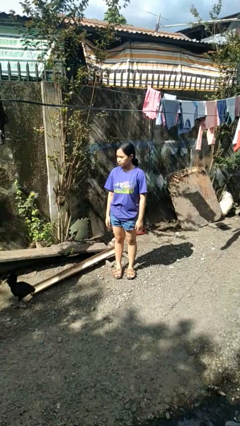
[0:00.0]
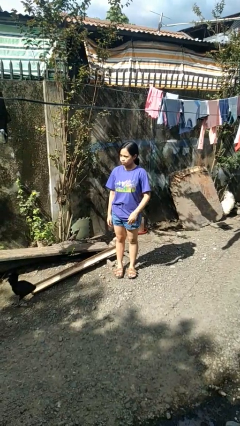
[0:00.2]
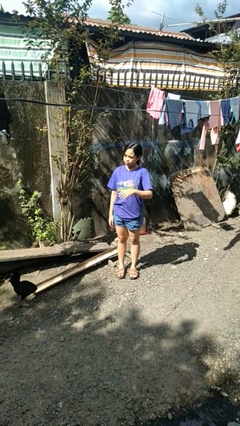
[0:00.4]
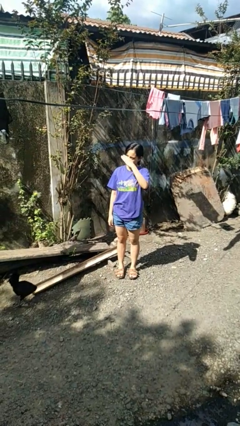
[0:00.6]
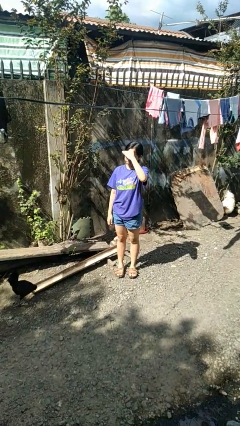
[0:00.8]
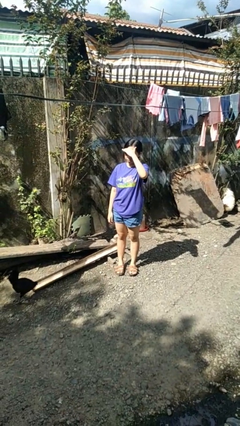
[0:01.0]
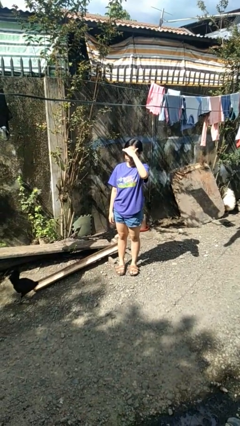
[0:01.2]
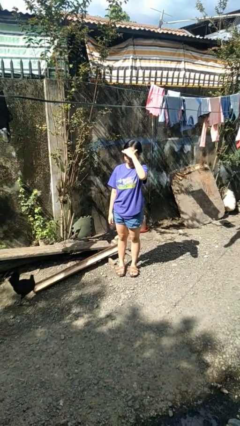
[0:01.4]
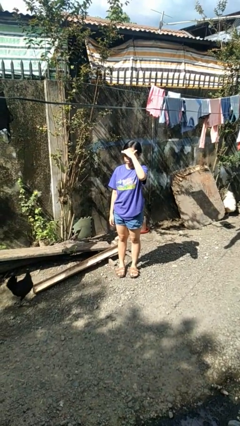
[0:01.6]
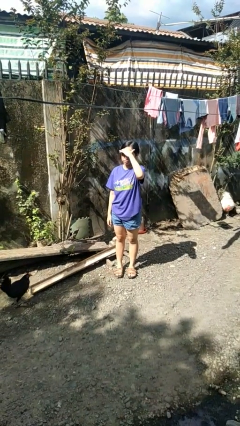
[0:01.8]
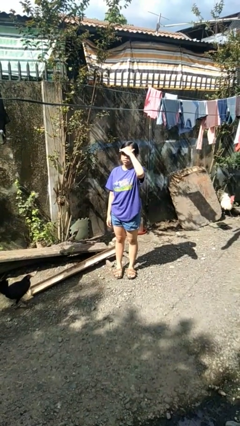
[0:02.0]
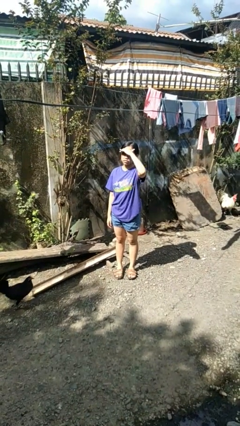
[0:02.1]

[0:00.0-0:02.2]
person shades eyes

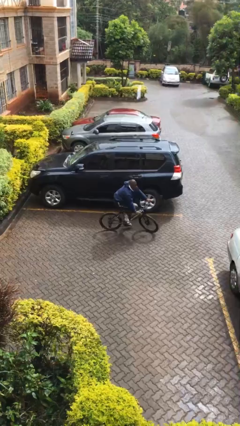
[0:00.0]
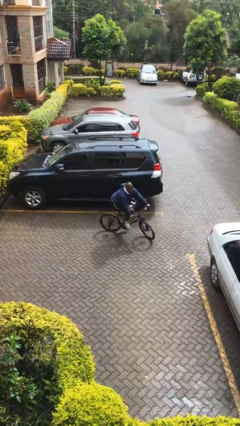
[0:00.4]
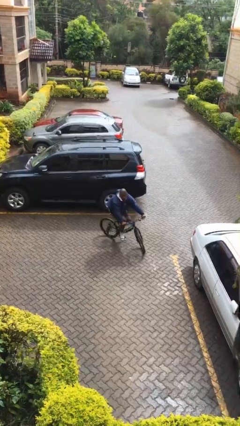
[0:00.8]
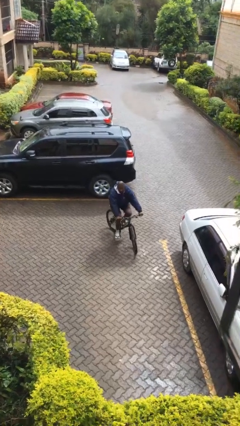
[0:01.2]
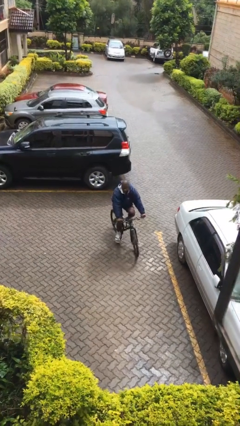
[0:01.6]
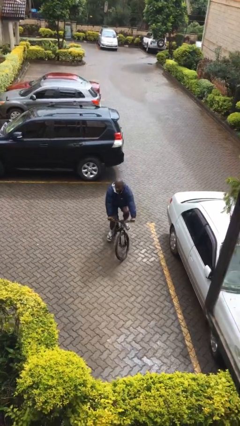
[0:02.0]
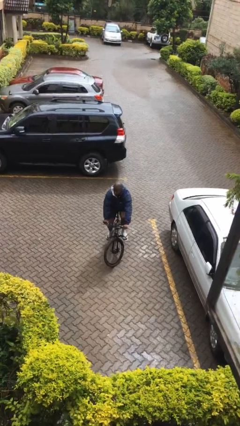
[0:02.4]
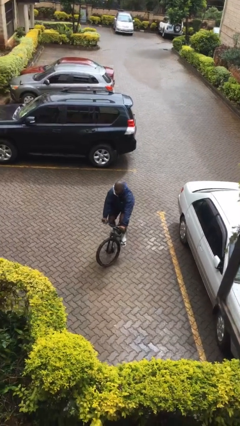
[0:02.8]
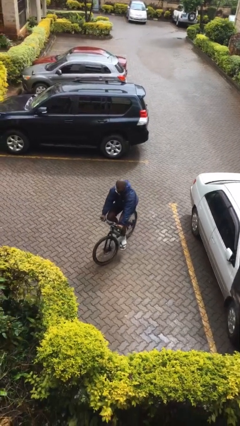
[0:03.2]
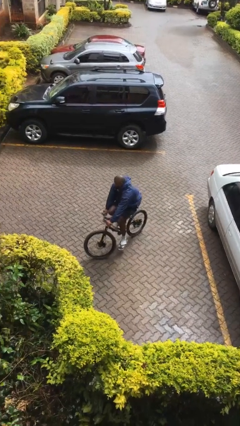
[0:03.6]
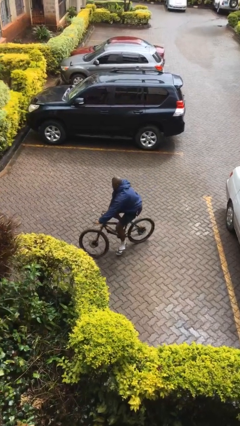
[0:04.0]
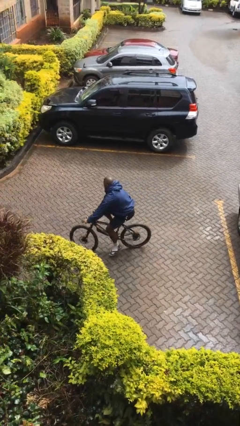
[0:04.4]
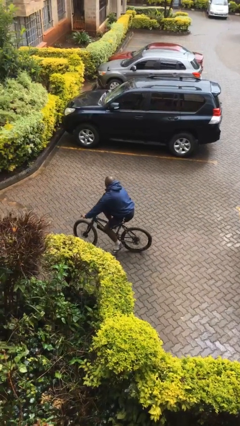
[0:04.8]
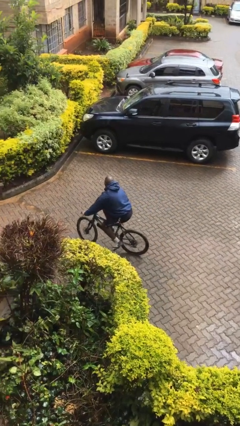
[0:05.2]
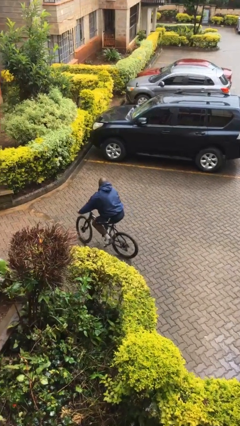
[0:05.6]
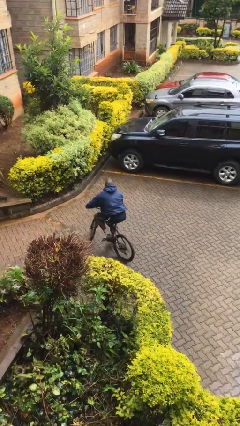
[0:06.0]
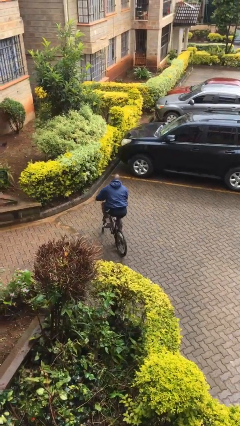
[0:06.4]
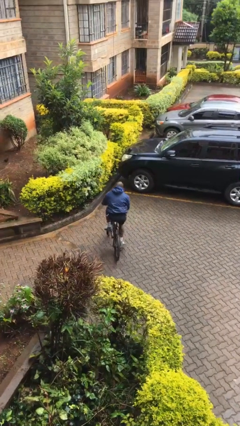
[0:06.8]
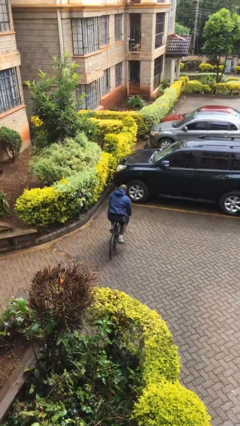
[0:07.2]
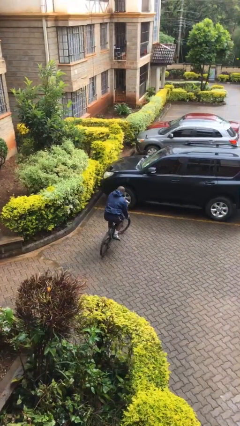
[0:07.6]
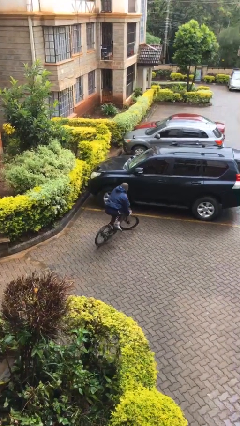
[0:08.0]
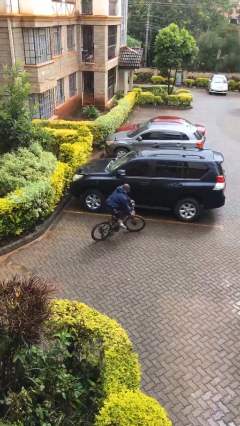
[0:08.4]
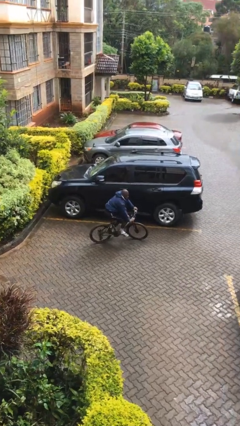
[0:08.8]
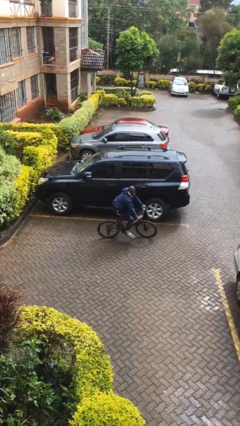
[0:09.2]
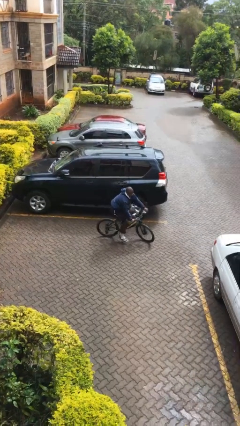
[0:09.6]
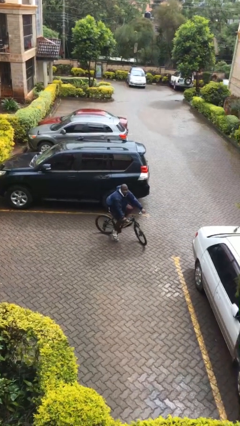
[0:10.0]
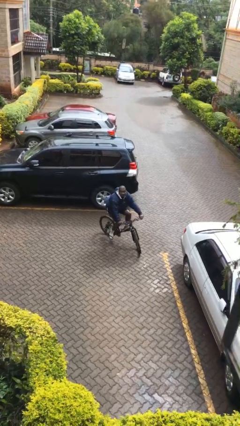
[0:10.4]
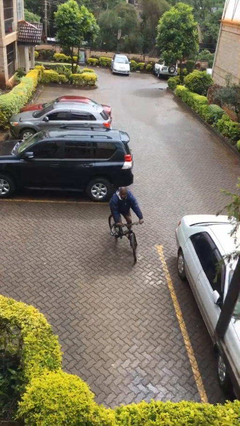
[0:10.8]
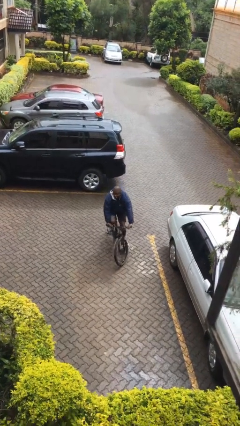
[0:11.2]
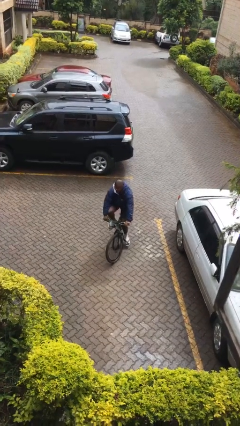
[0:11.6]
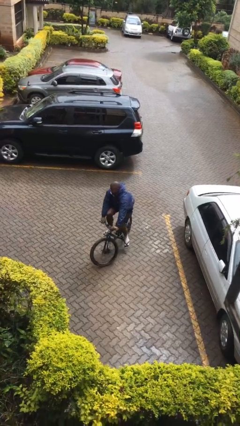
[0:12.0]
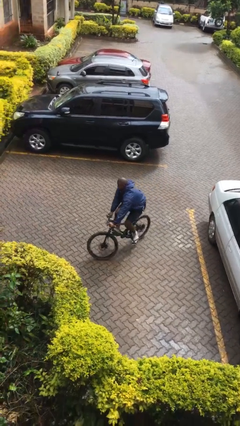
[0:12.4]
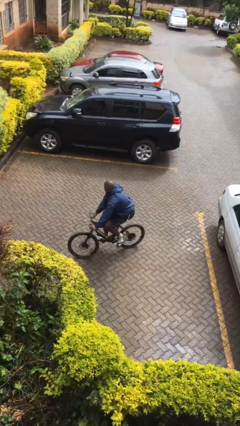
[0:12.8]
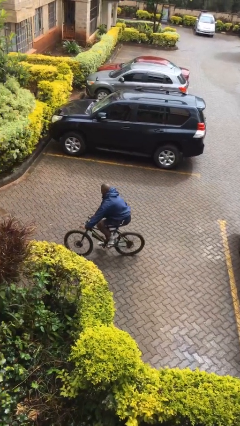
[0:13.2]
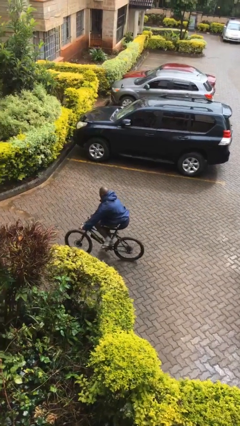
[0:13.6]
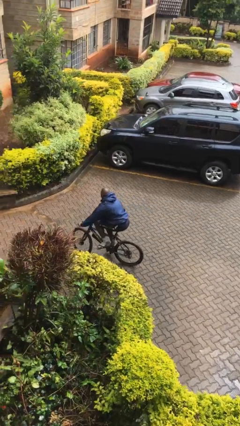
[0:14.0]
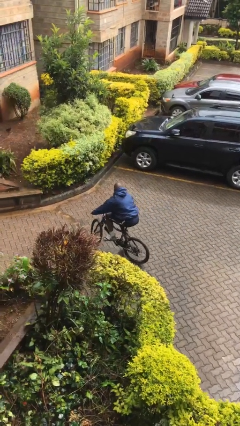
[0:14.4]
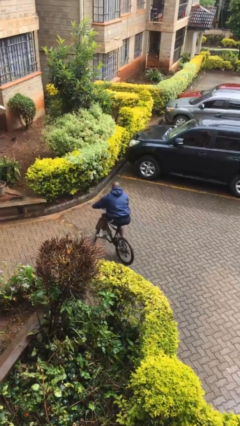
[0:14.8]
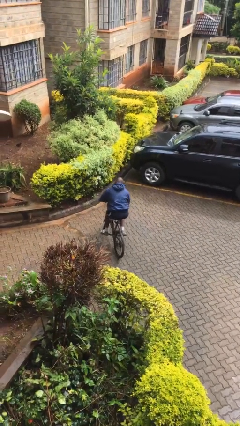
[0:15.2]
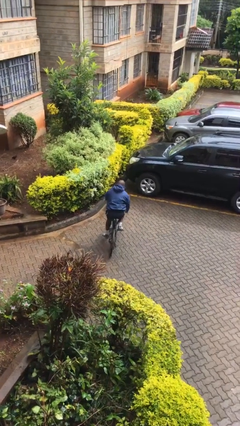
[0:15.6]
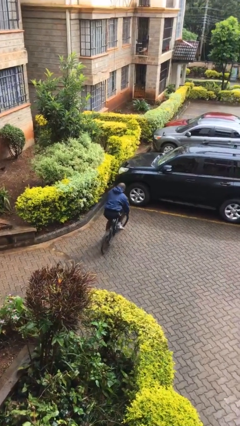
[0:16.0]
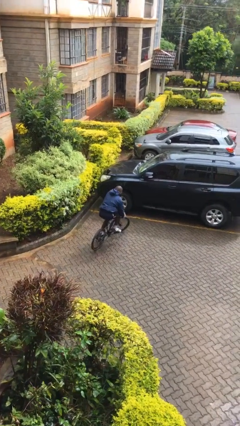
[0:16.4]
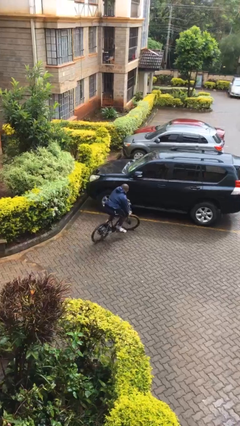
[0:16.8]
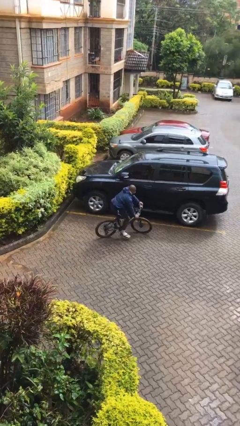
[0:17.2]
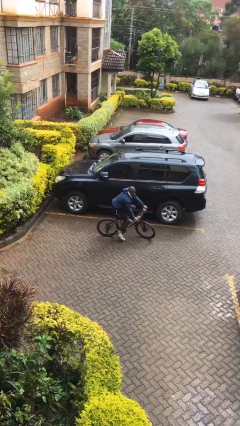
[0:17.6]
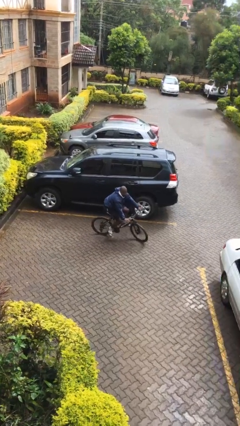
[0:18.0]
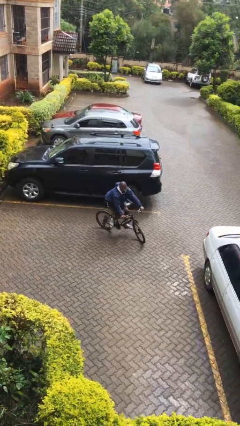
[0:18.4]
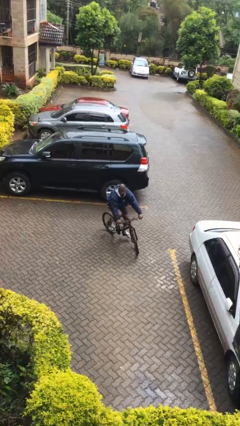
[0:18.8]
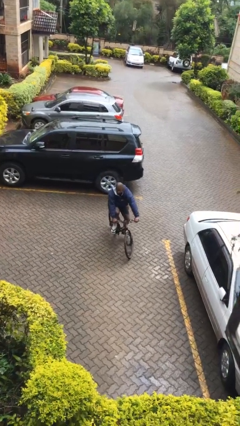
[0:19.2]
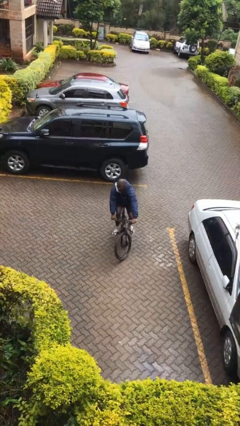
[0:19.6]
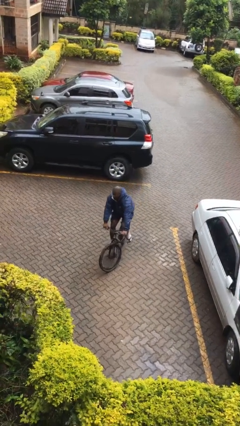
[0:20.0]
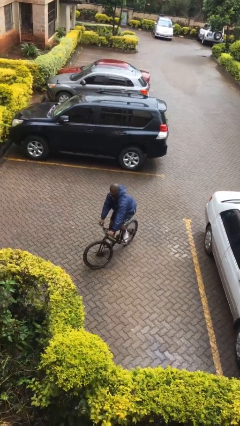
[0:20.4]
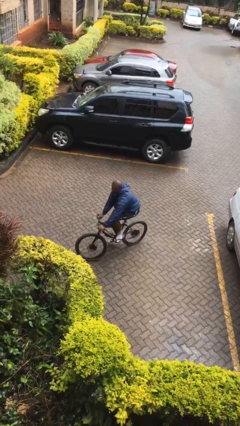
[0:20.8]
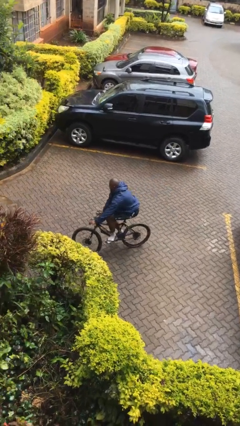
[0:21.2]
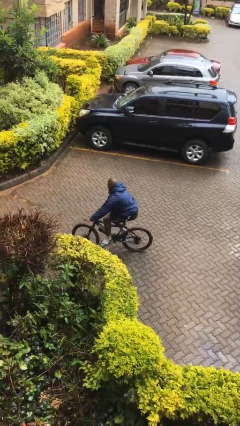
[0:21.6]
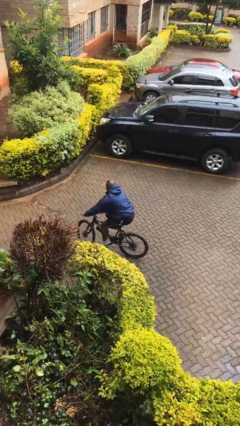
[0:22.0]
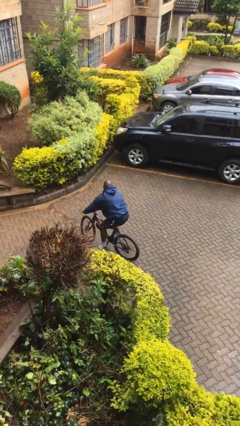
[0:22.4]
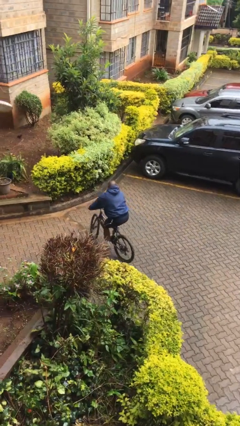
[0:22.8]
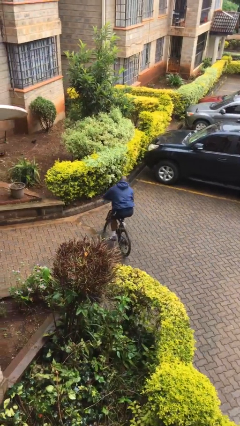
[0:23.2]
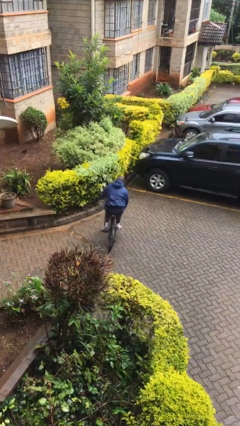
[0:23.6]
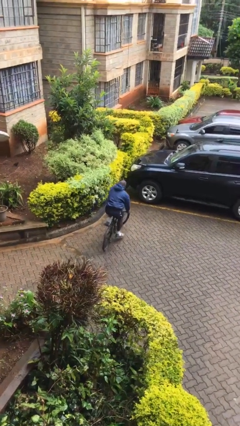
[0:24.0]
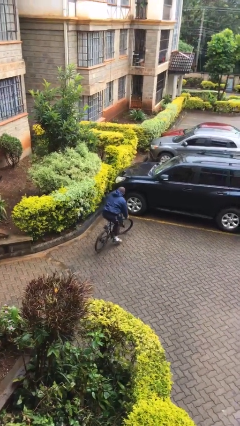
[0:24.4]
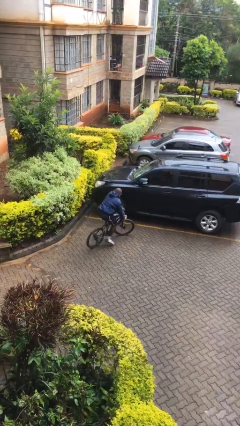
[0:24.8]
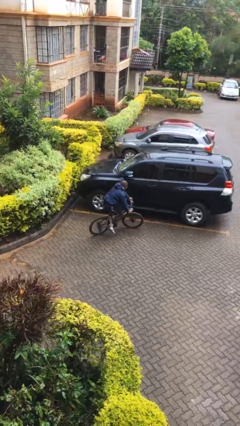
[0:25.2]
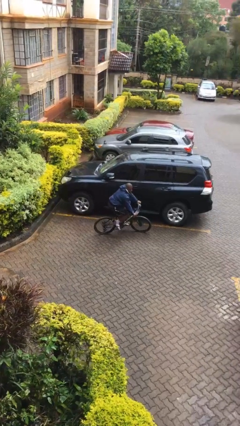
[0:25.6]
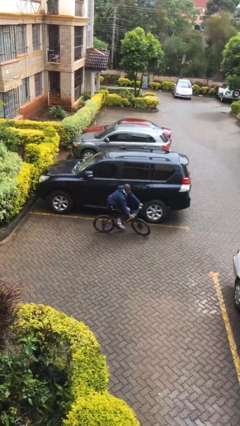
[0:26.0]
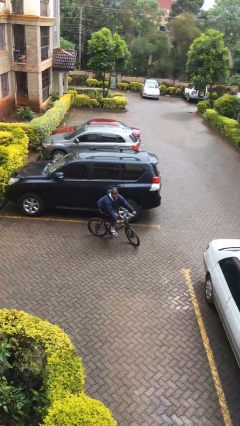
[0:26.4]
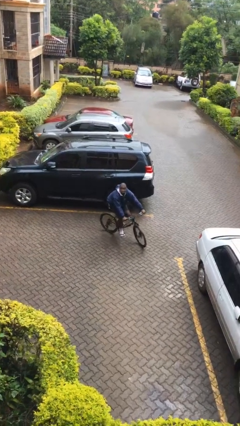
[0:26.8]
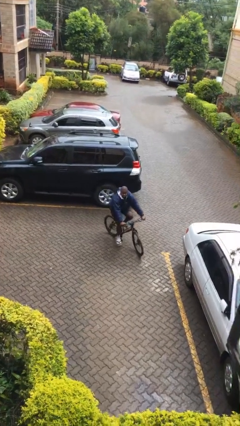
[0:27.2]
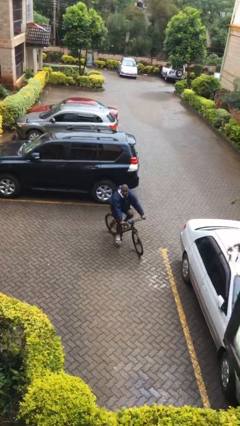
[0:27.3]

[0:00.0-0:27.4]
person rides bicycle

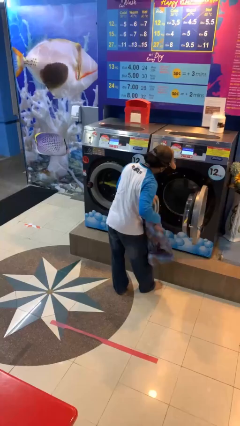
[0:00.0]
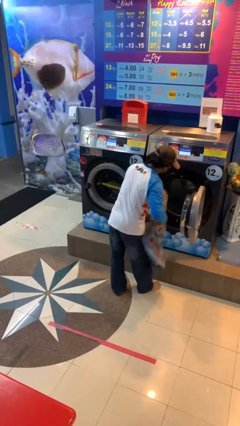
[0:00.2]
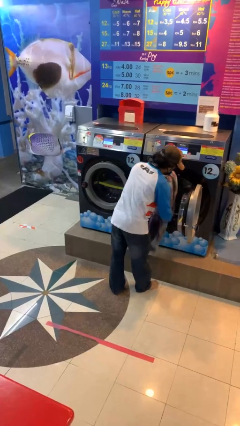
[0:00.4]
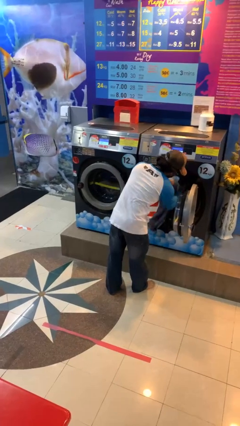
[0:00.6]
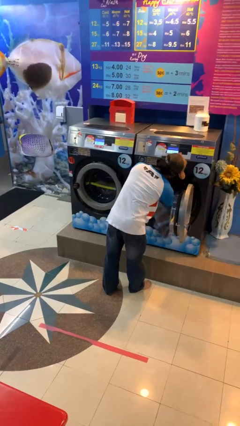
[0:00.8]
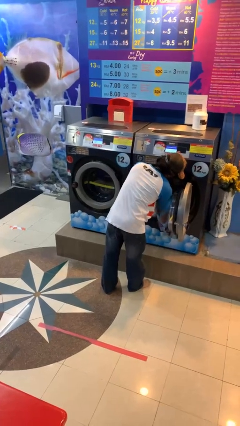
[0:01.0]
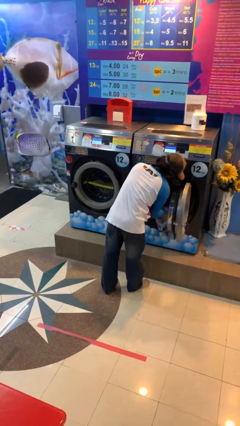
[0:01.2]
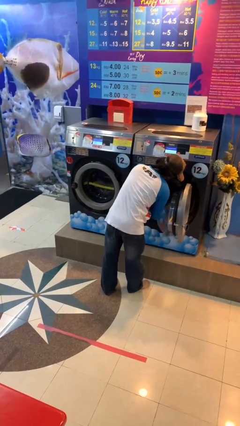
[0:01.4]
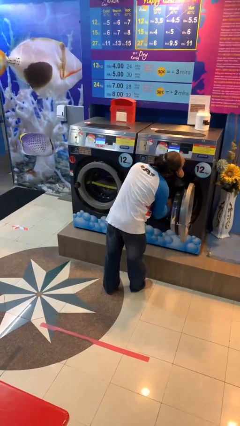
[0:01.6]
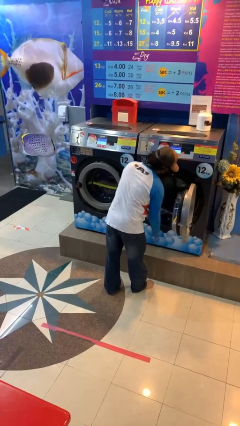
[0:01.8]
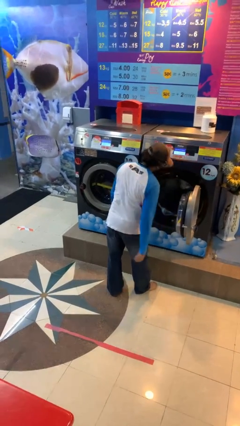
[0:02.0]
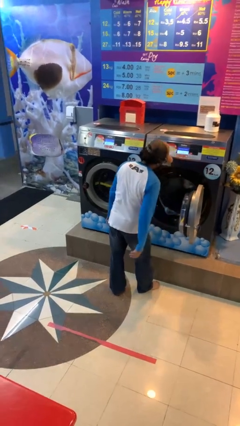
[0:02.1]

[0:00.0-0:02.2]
person loads clotheswasher
